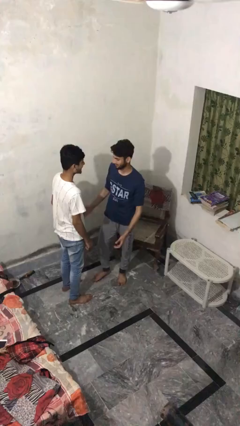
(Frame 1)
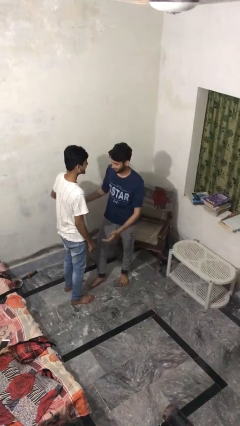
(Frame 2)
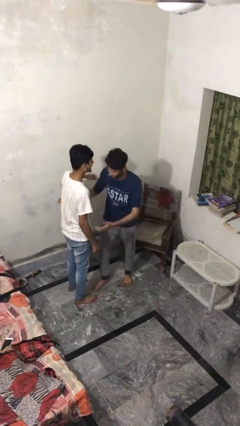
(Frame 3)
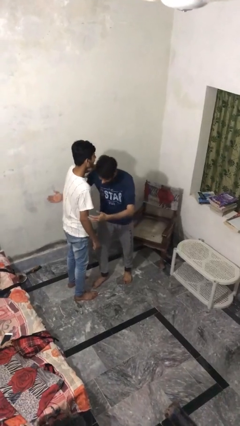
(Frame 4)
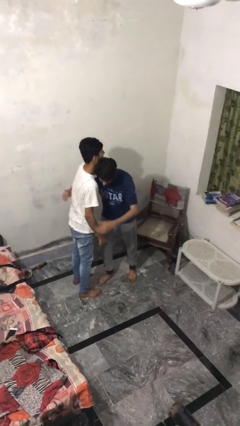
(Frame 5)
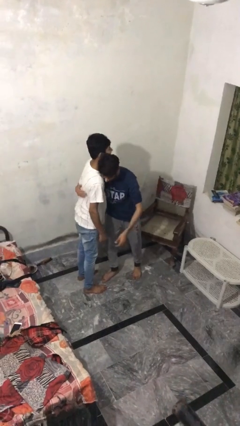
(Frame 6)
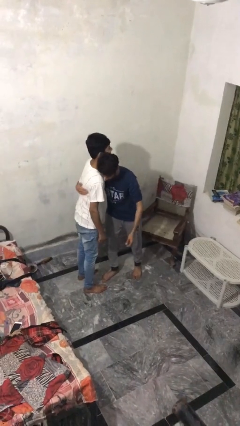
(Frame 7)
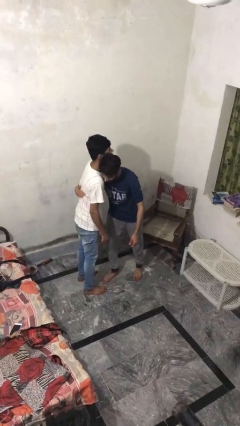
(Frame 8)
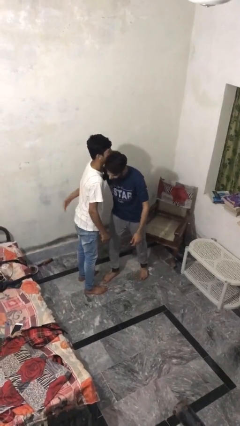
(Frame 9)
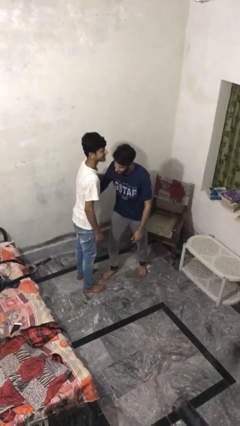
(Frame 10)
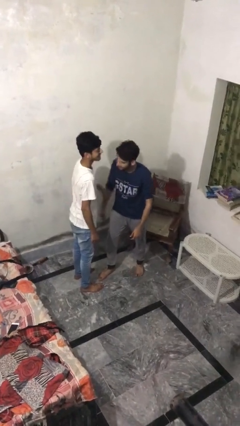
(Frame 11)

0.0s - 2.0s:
person embraces person

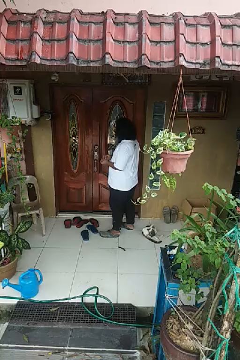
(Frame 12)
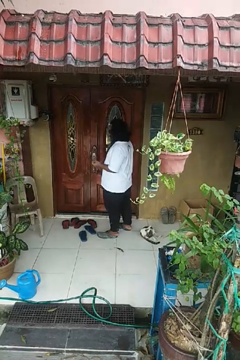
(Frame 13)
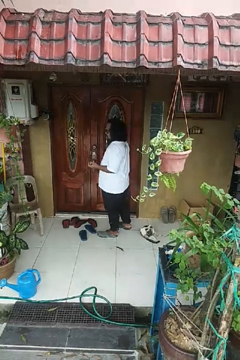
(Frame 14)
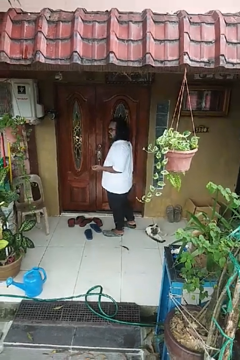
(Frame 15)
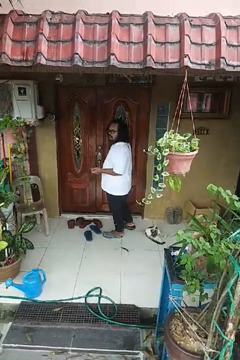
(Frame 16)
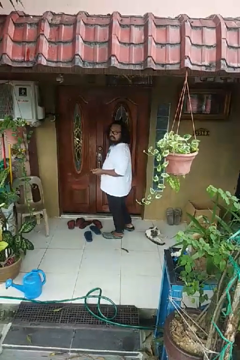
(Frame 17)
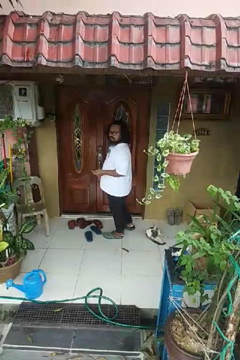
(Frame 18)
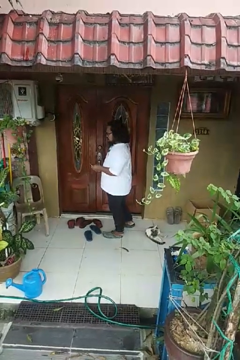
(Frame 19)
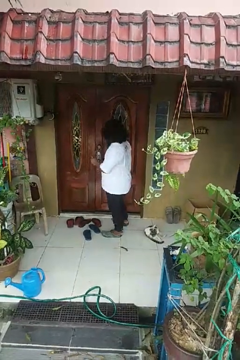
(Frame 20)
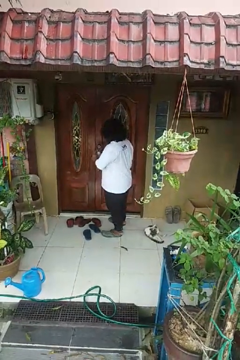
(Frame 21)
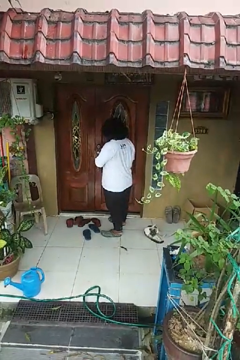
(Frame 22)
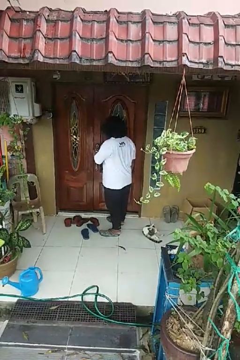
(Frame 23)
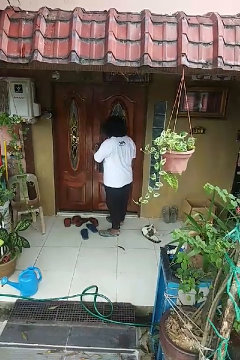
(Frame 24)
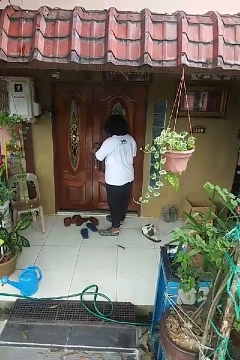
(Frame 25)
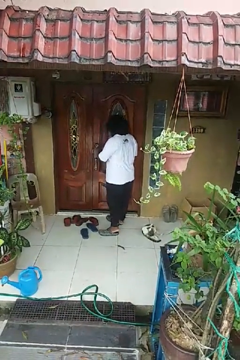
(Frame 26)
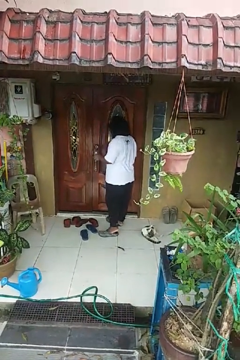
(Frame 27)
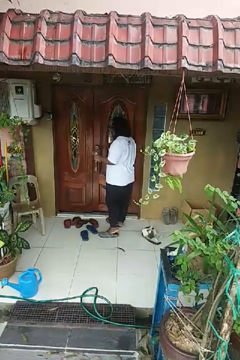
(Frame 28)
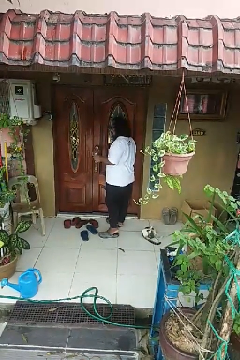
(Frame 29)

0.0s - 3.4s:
person unlocks door with keys

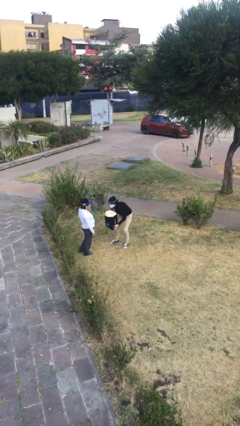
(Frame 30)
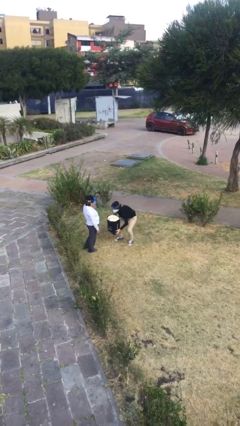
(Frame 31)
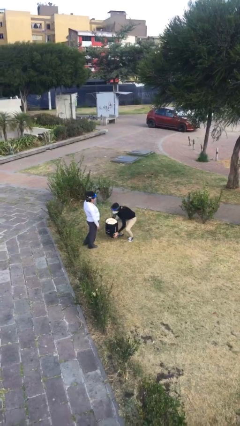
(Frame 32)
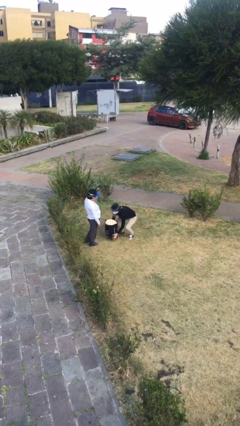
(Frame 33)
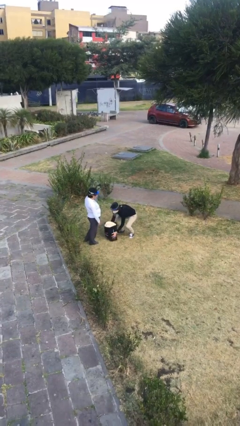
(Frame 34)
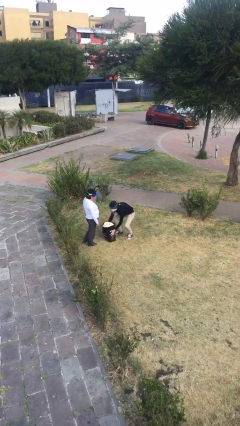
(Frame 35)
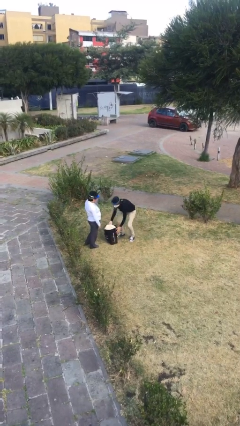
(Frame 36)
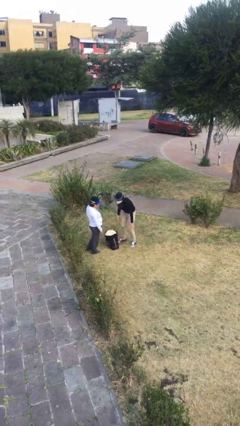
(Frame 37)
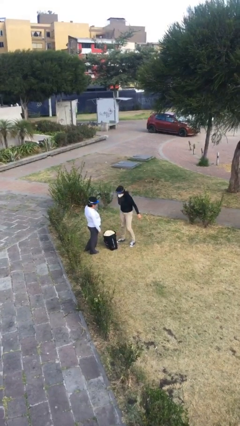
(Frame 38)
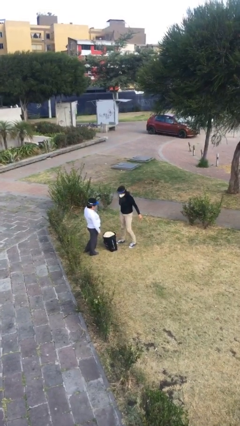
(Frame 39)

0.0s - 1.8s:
person puts down object on floor

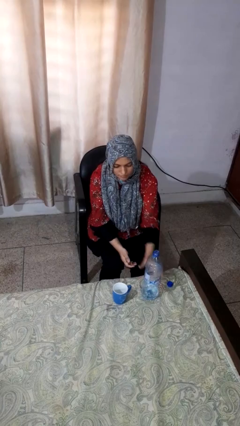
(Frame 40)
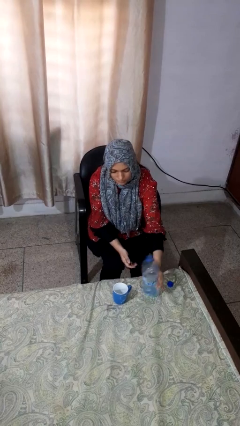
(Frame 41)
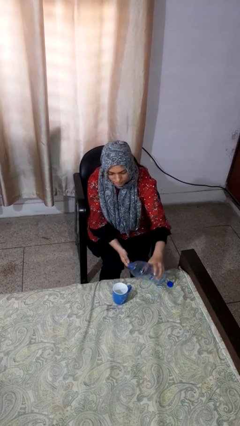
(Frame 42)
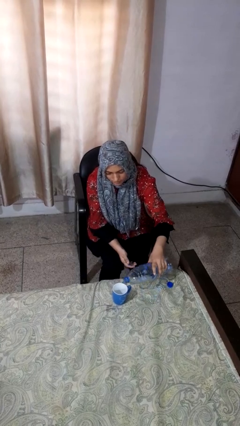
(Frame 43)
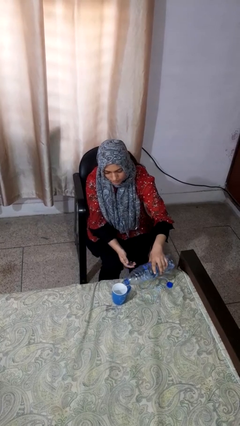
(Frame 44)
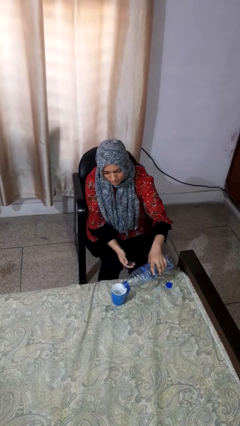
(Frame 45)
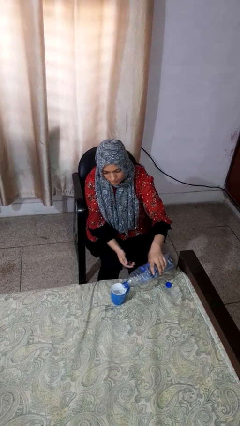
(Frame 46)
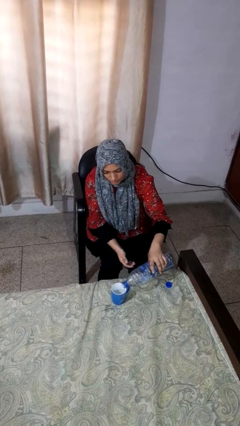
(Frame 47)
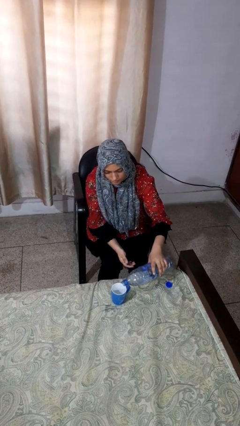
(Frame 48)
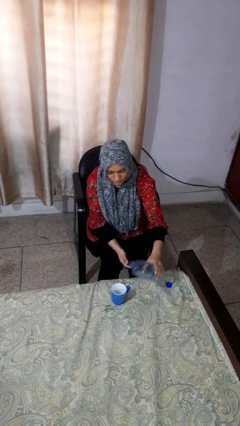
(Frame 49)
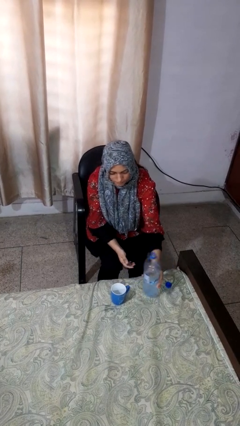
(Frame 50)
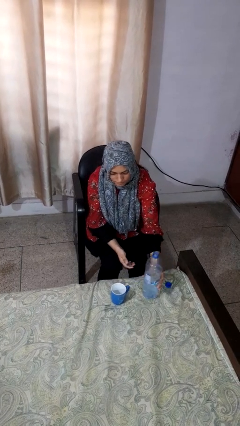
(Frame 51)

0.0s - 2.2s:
person pours liquid into cup

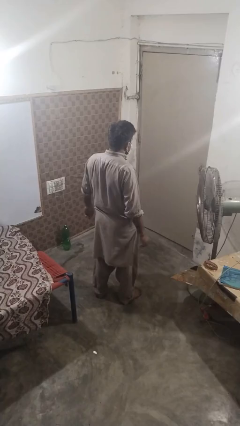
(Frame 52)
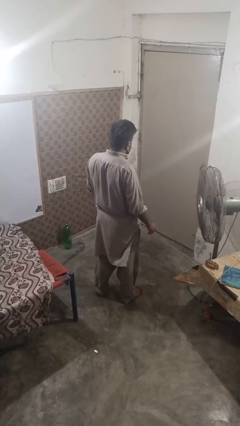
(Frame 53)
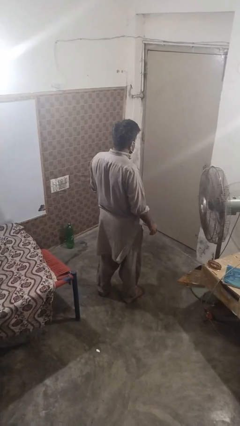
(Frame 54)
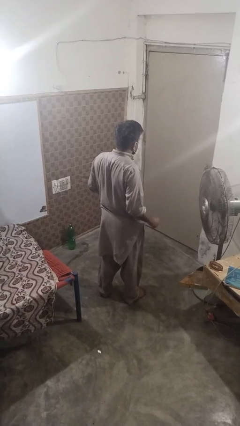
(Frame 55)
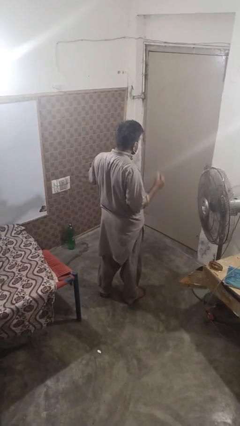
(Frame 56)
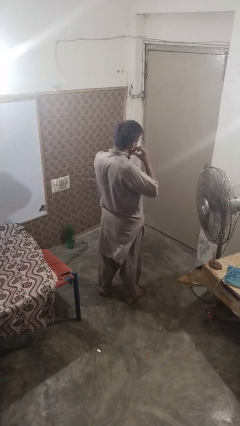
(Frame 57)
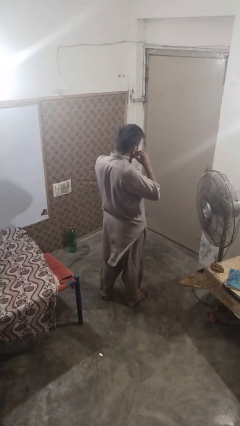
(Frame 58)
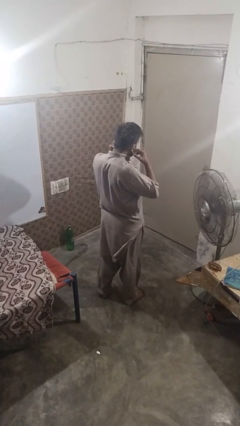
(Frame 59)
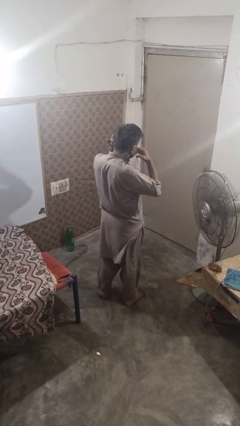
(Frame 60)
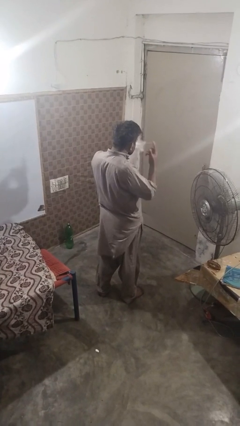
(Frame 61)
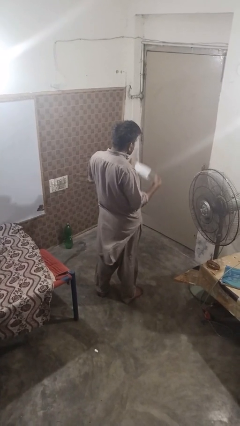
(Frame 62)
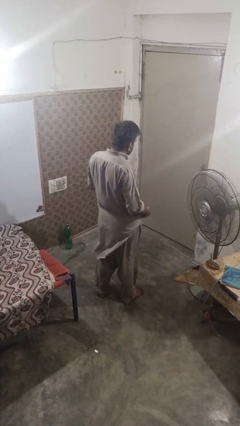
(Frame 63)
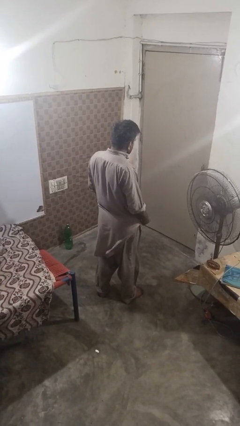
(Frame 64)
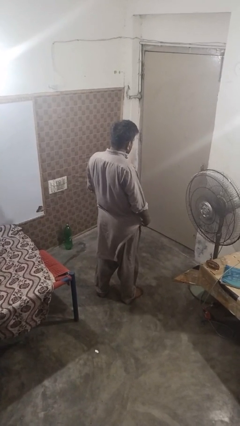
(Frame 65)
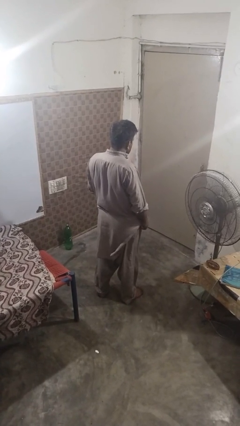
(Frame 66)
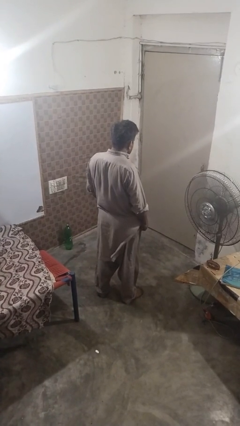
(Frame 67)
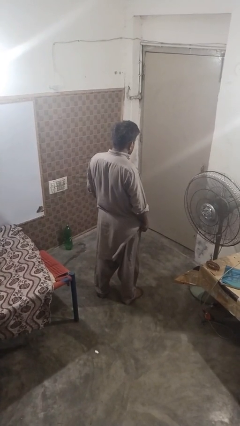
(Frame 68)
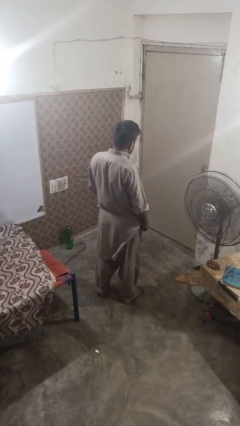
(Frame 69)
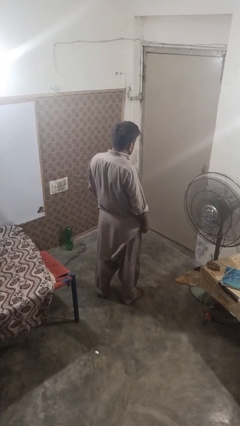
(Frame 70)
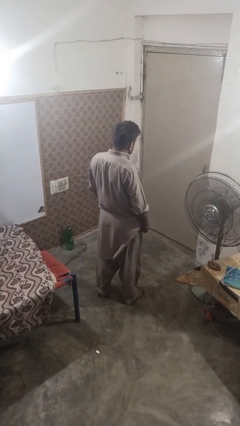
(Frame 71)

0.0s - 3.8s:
person takes off facemask

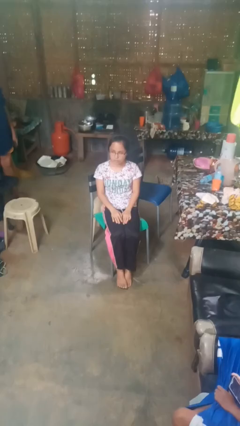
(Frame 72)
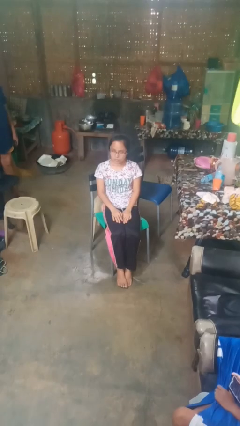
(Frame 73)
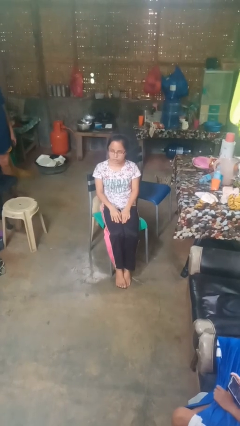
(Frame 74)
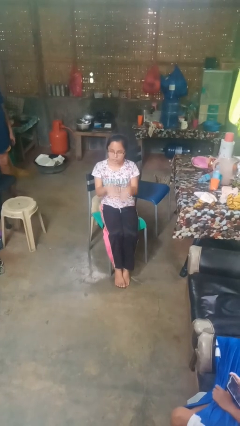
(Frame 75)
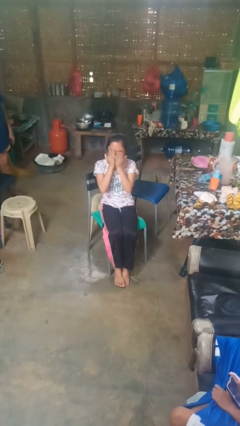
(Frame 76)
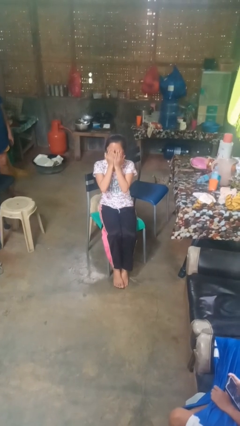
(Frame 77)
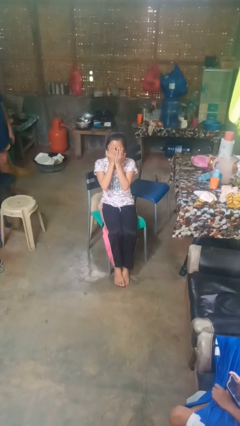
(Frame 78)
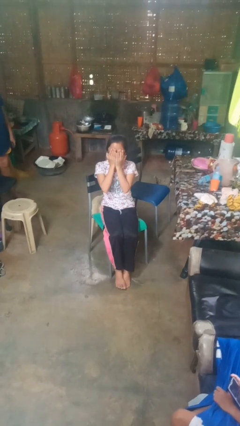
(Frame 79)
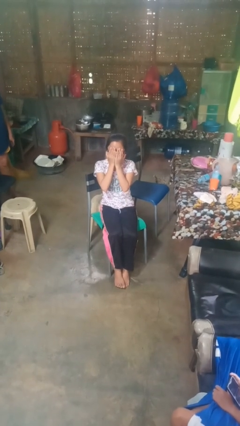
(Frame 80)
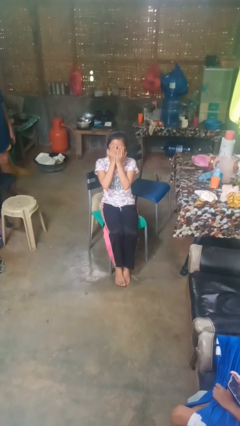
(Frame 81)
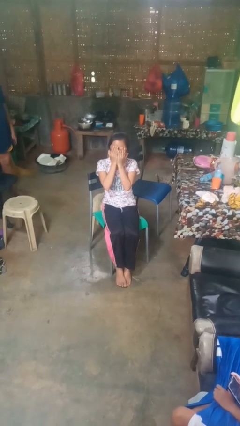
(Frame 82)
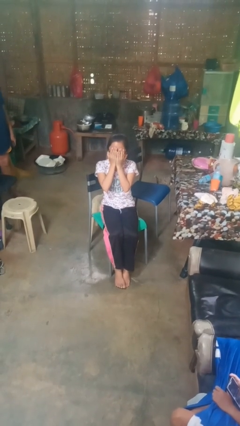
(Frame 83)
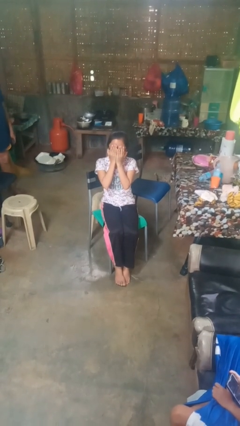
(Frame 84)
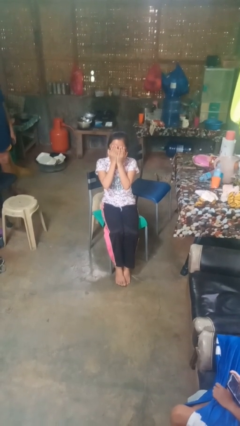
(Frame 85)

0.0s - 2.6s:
person covers face with hands

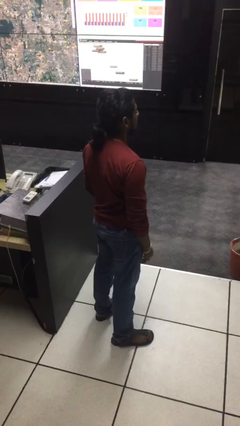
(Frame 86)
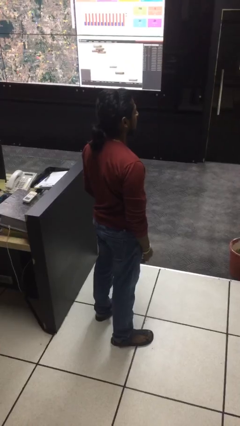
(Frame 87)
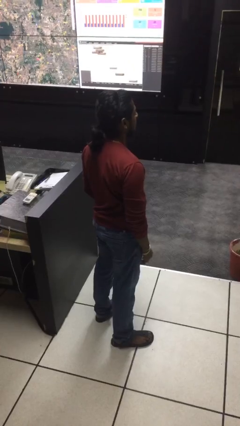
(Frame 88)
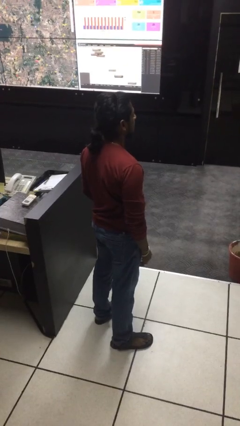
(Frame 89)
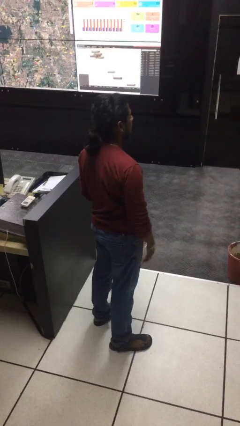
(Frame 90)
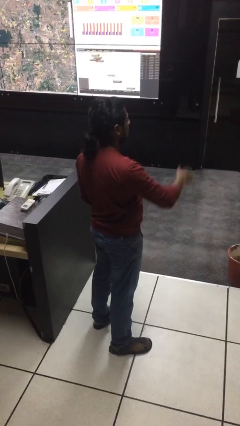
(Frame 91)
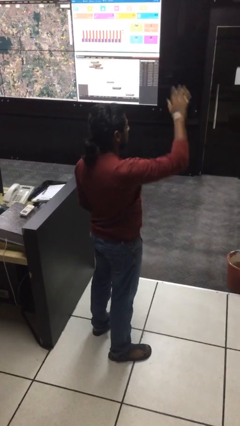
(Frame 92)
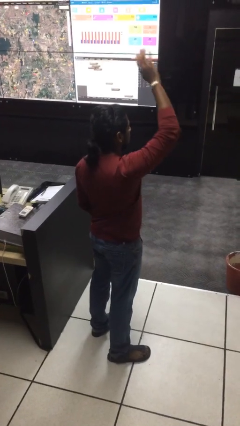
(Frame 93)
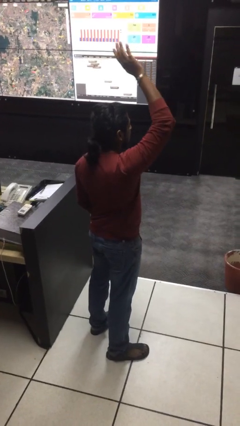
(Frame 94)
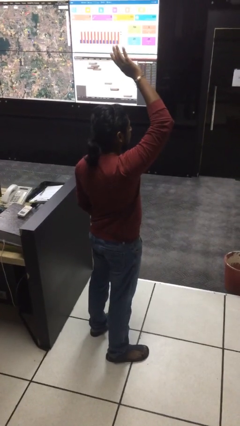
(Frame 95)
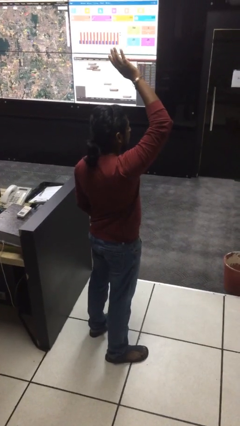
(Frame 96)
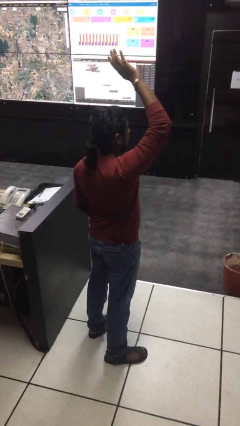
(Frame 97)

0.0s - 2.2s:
person gestures raise hand
